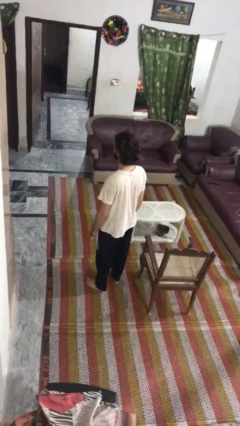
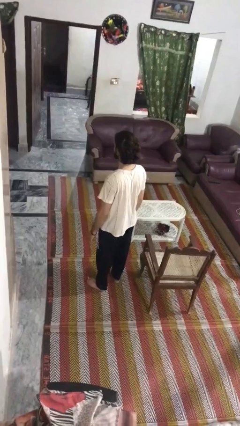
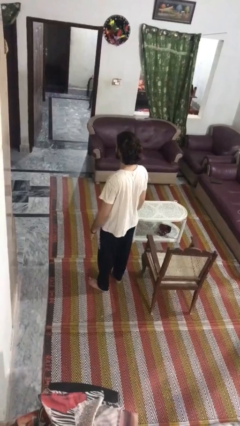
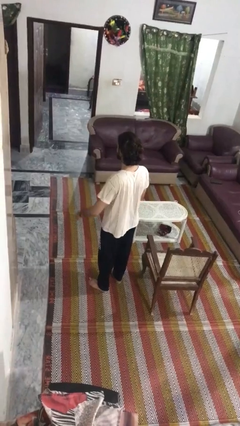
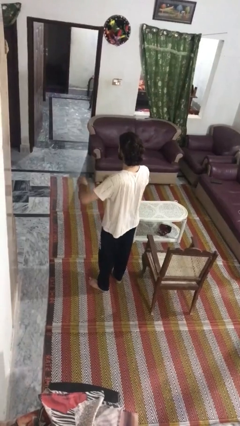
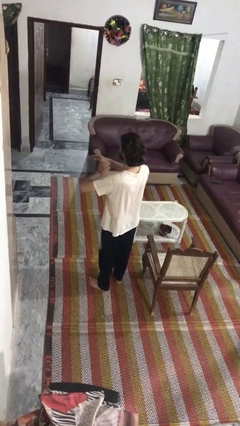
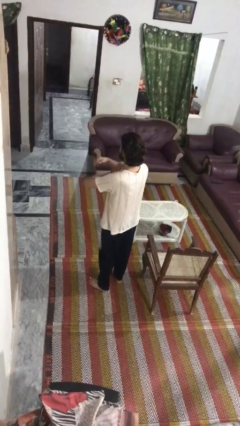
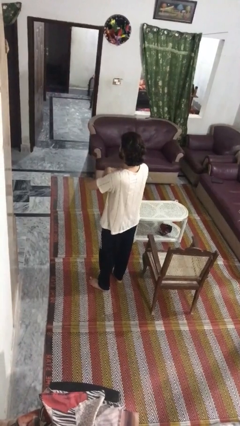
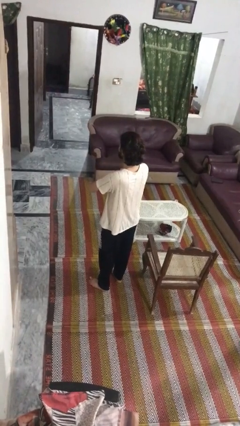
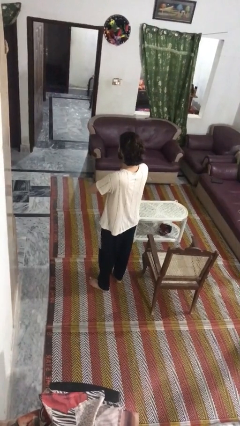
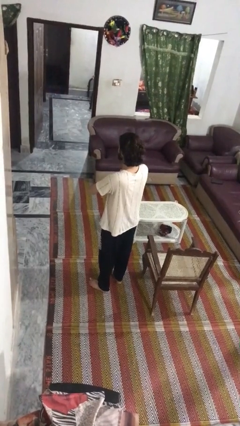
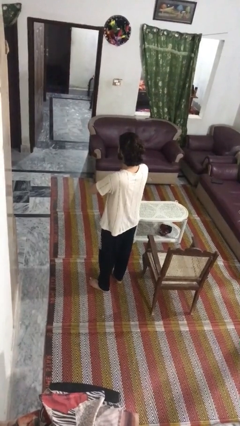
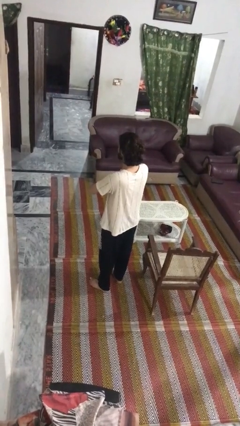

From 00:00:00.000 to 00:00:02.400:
person crosses arms

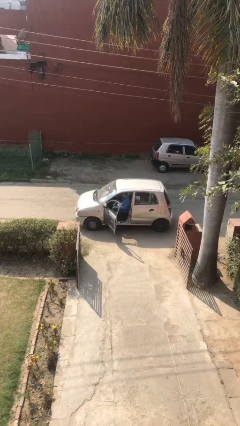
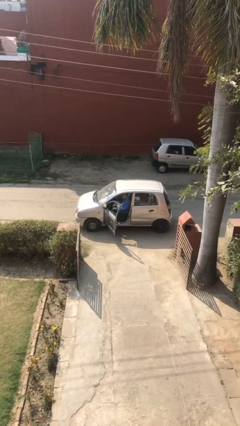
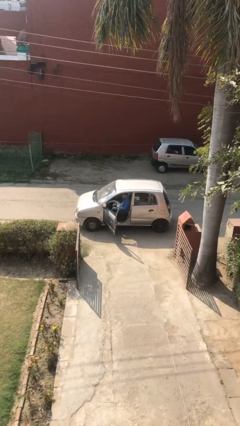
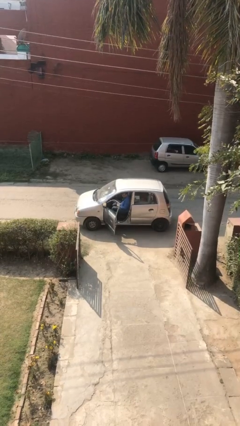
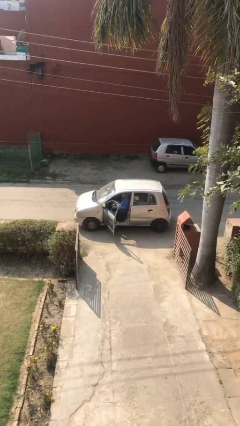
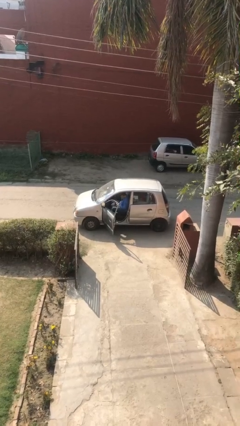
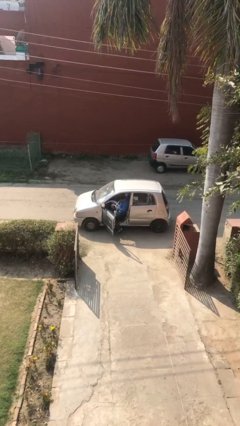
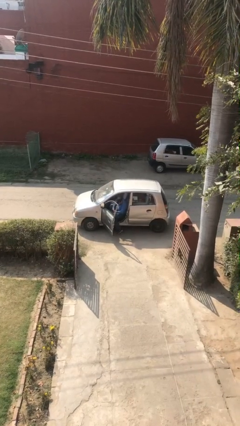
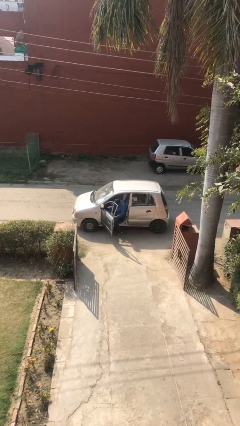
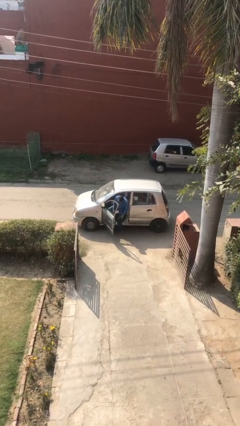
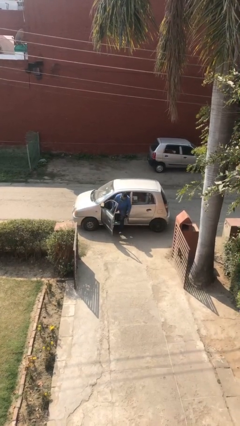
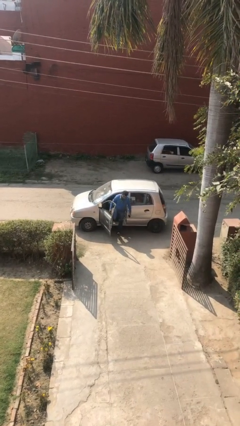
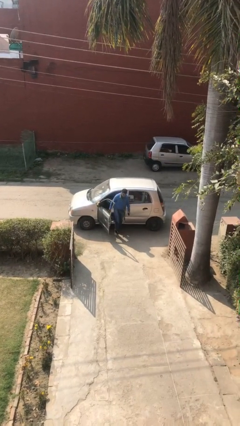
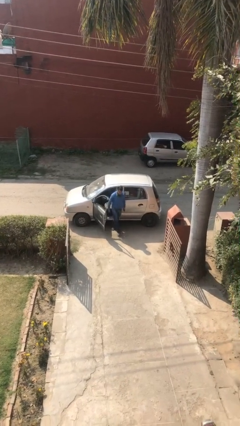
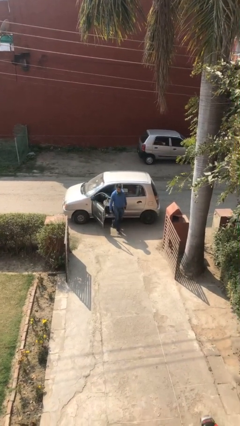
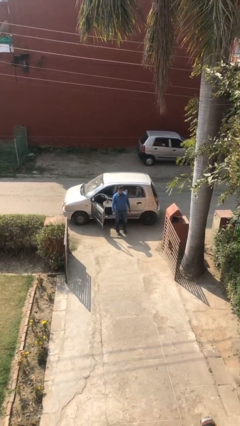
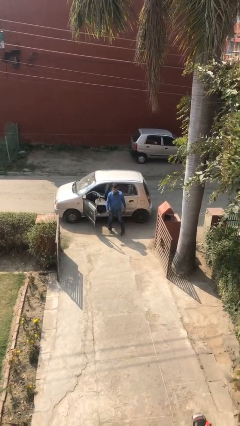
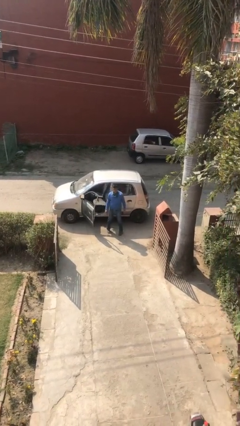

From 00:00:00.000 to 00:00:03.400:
person exits car

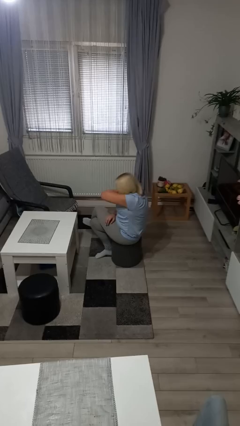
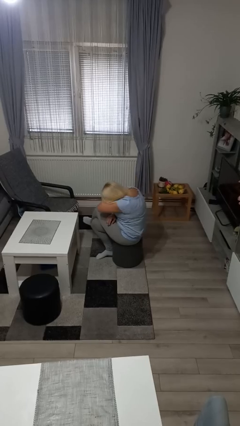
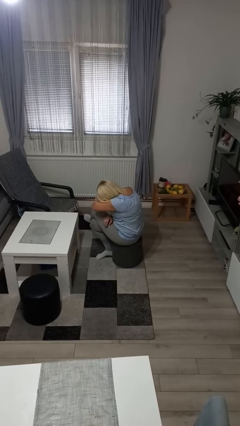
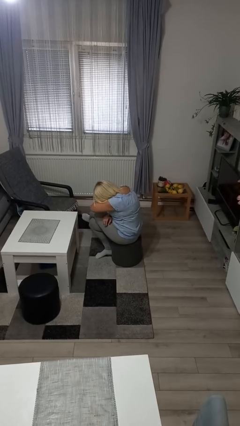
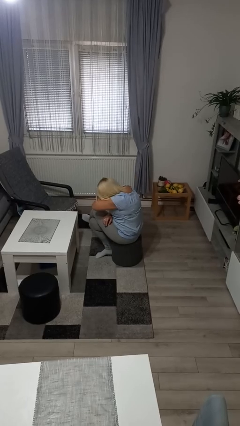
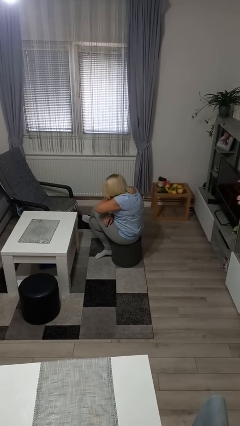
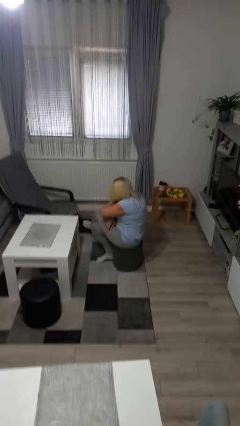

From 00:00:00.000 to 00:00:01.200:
person sneezes into arm

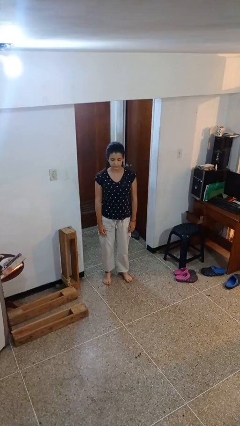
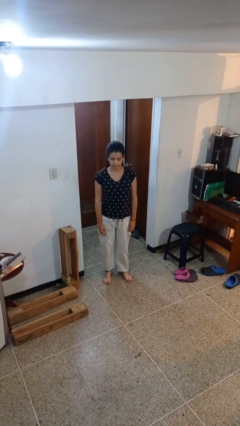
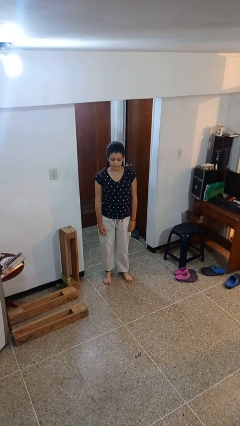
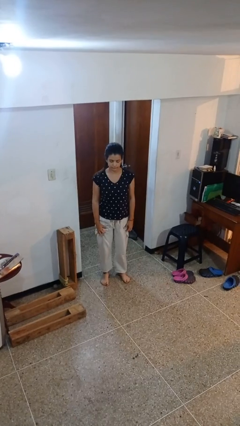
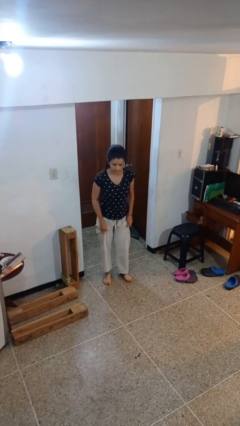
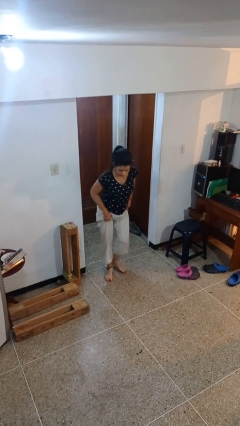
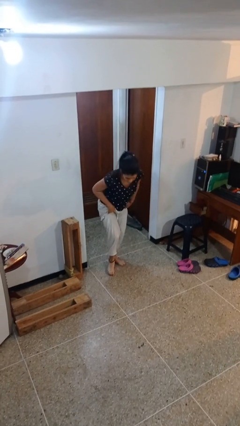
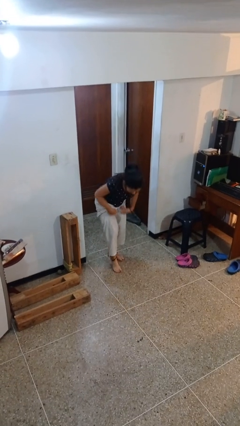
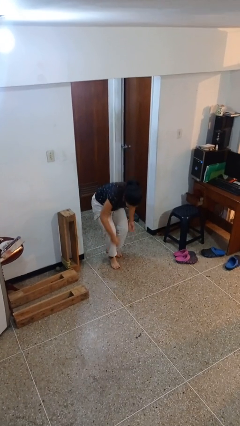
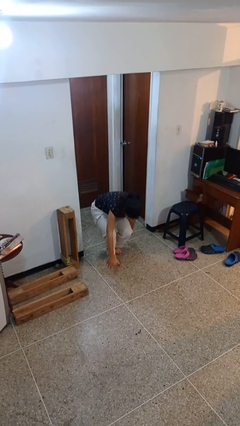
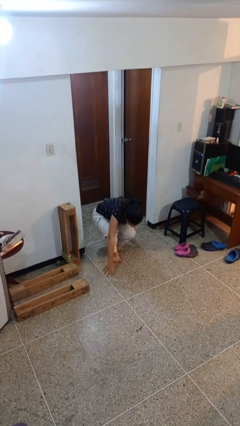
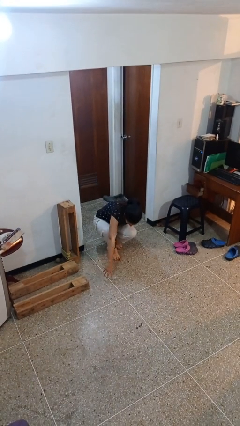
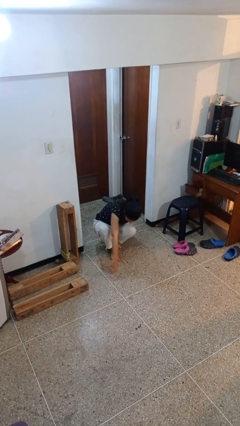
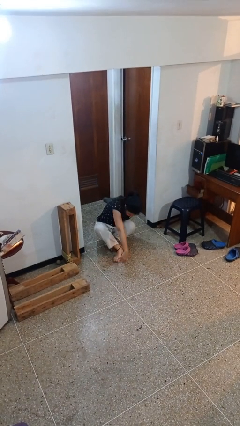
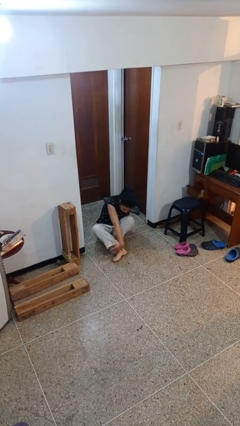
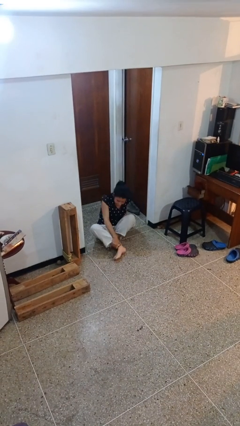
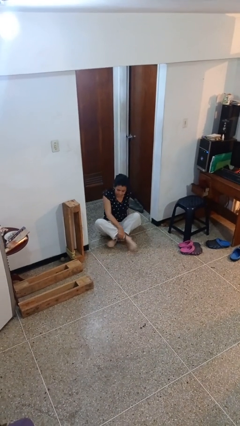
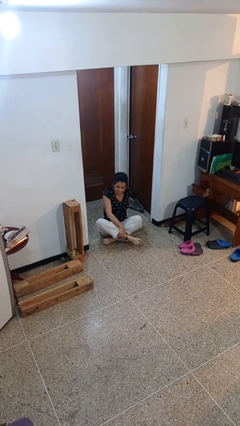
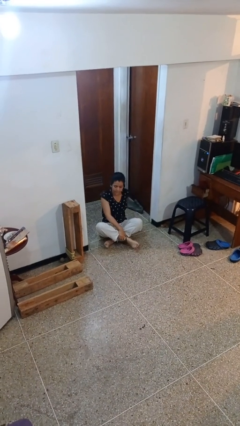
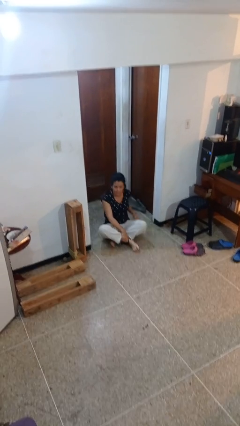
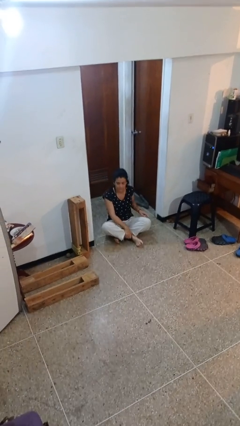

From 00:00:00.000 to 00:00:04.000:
person sits crisscross

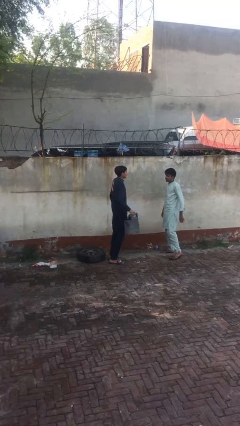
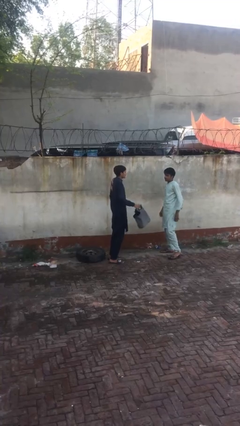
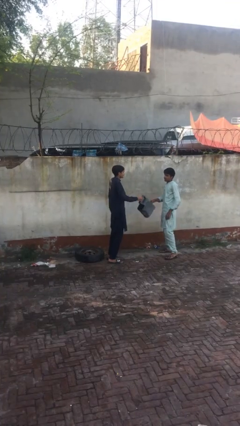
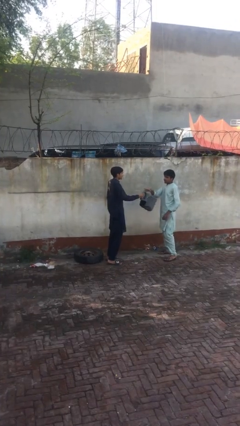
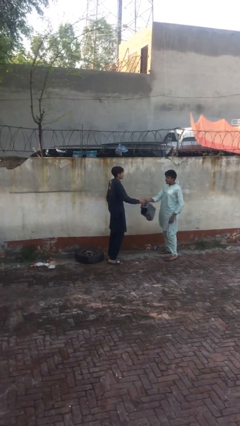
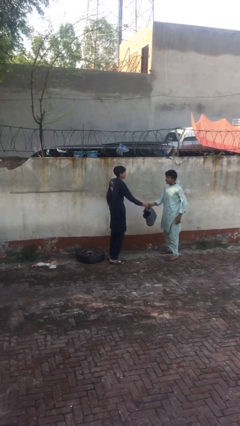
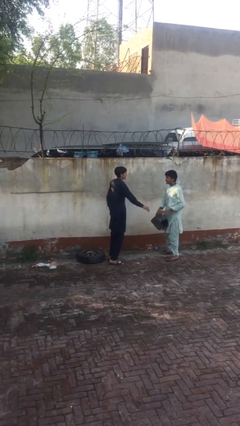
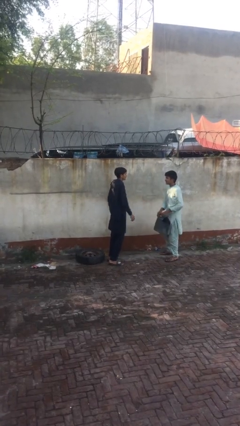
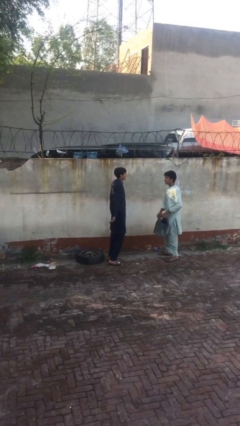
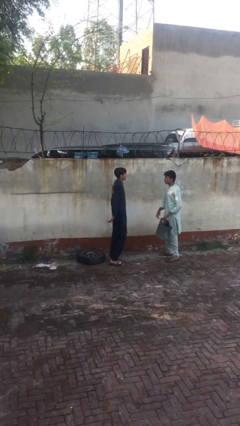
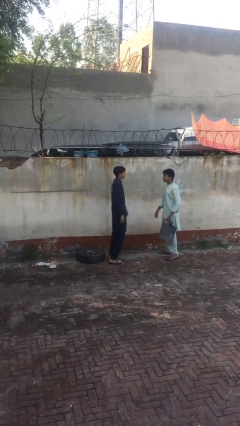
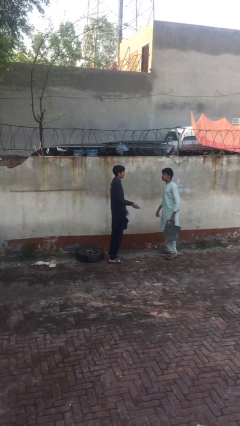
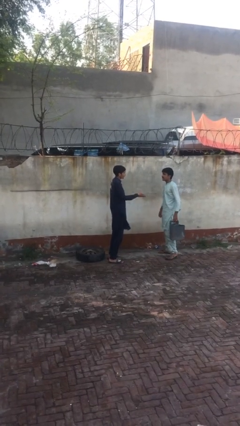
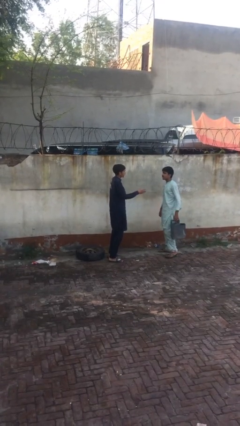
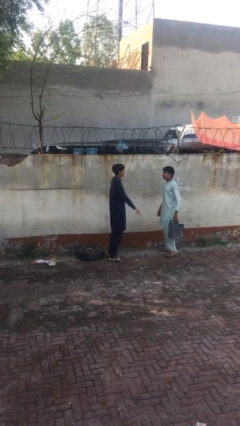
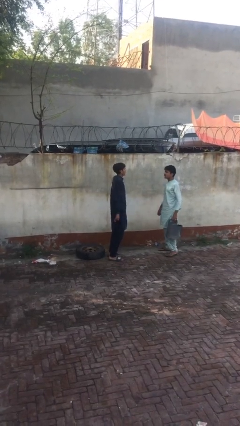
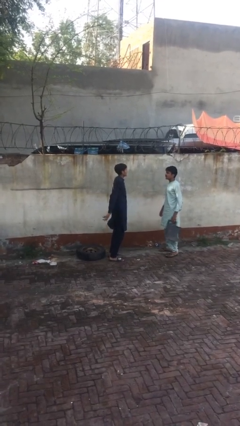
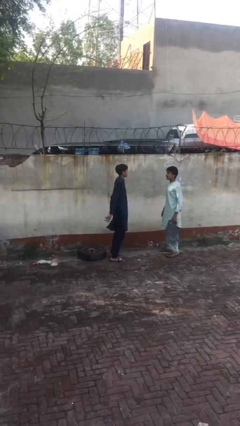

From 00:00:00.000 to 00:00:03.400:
person transfers object to person

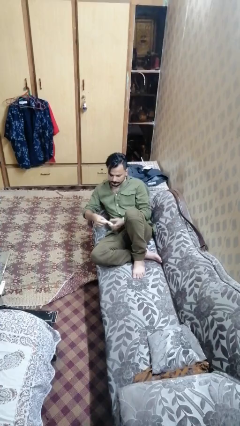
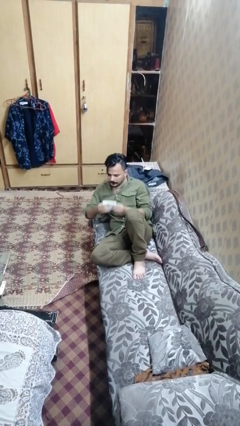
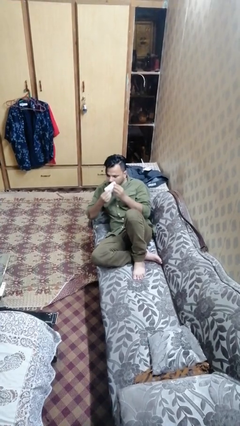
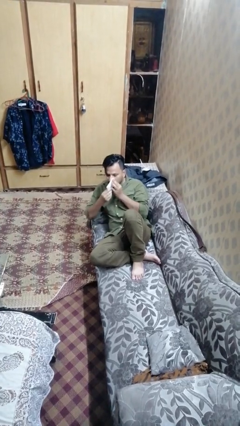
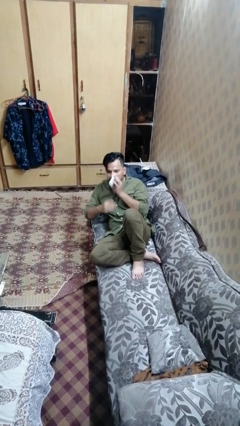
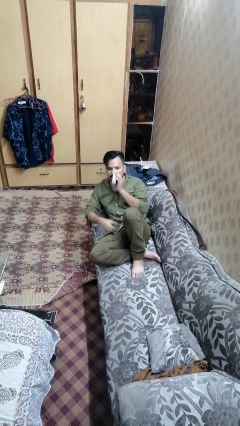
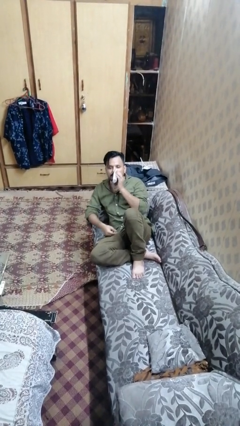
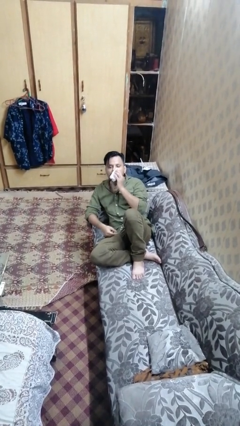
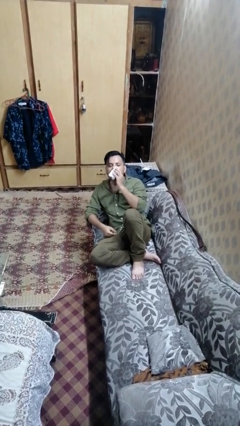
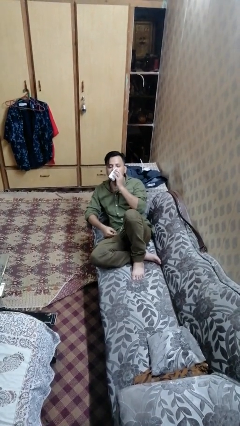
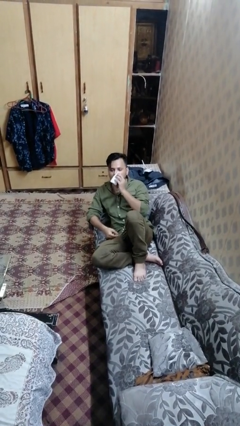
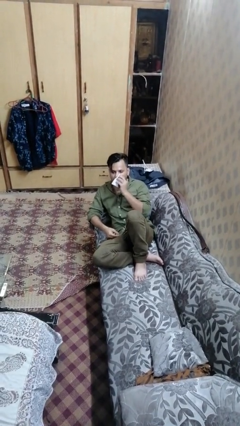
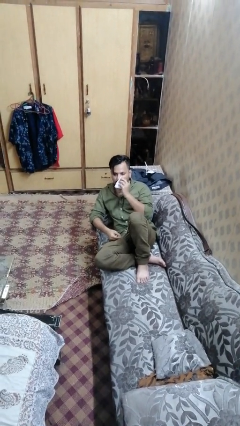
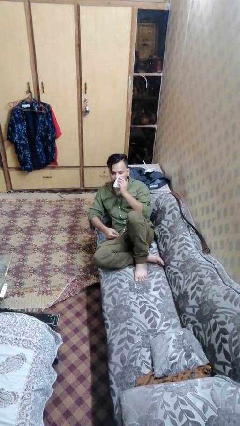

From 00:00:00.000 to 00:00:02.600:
person blows nose

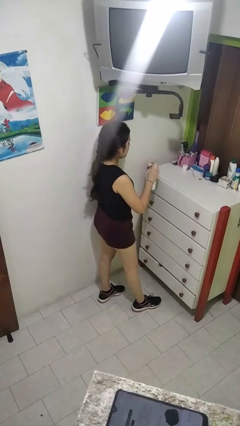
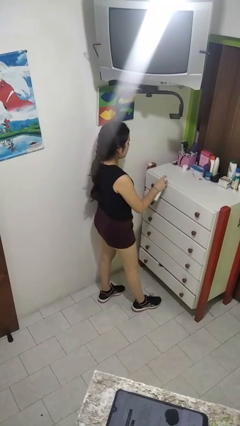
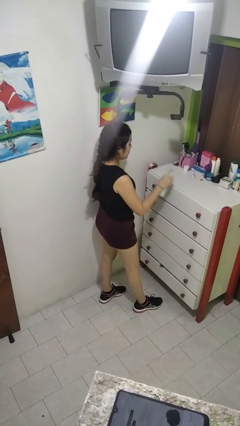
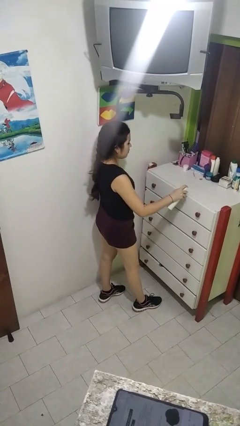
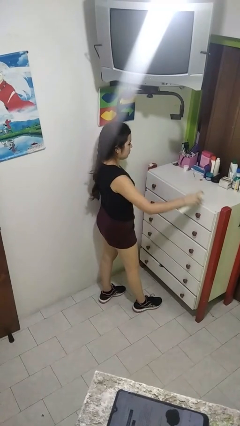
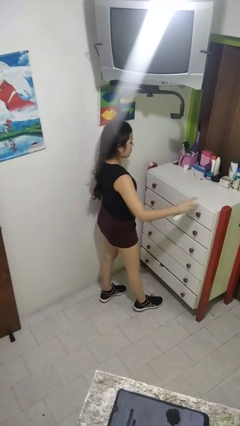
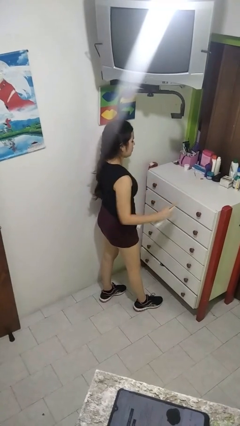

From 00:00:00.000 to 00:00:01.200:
person sprays from bottle
